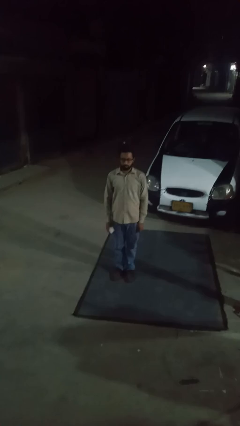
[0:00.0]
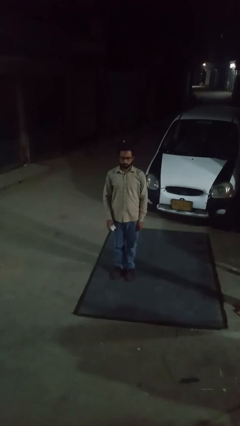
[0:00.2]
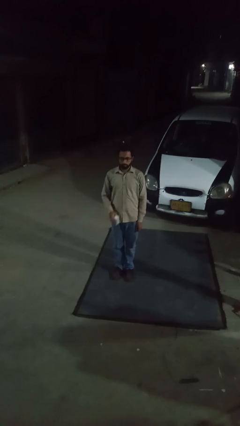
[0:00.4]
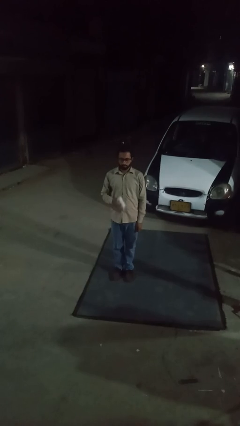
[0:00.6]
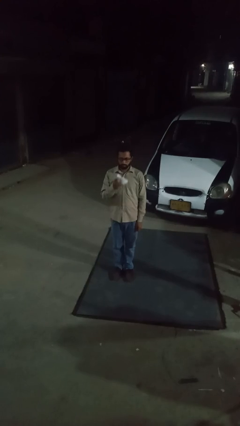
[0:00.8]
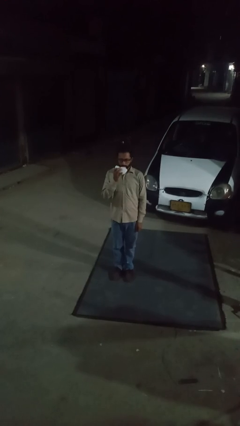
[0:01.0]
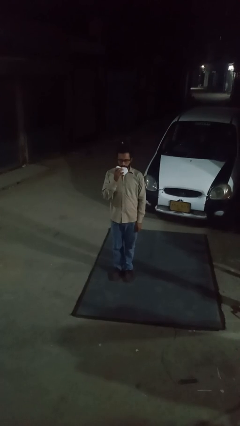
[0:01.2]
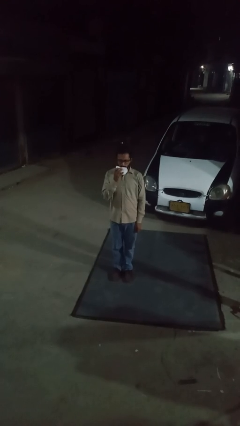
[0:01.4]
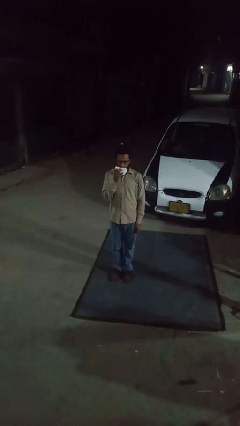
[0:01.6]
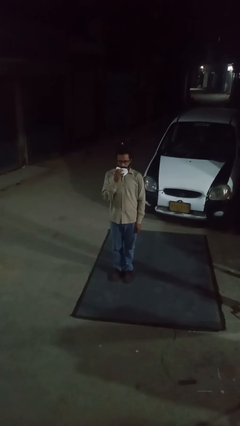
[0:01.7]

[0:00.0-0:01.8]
person wipes mouth with napkin

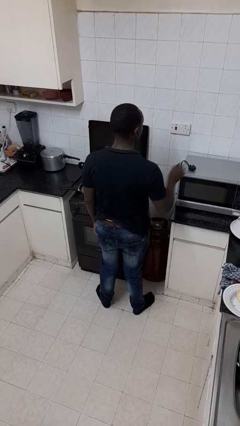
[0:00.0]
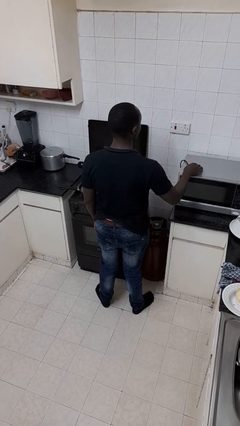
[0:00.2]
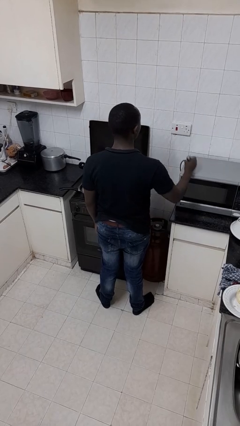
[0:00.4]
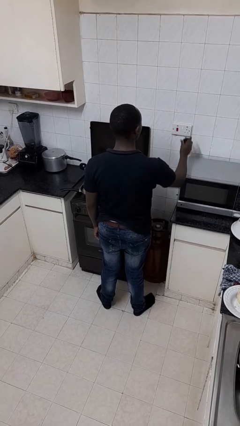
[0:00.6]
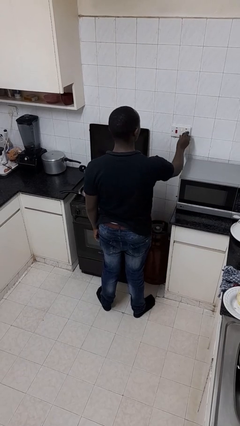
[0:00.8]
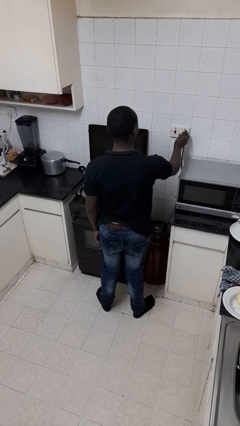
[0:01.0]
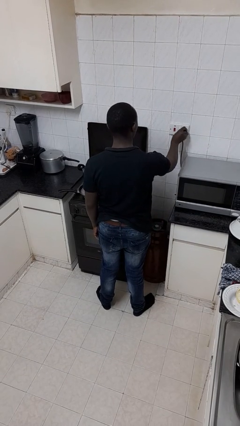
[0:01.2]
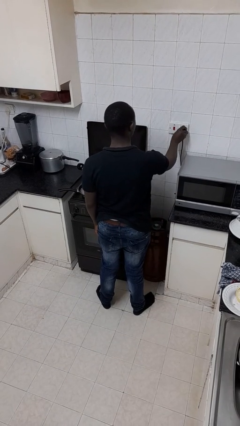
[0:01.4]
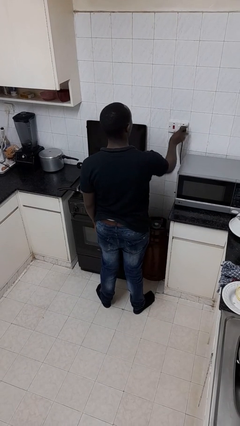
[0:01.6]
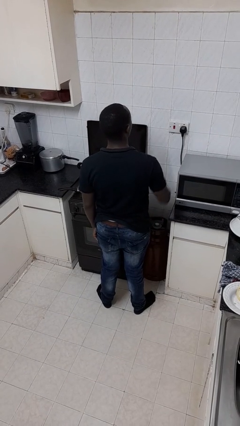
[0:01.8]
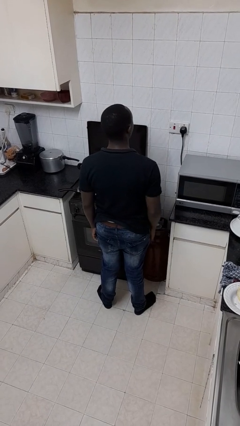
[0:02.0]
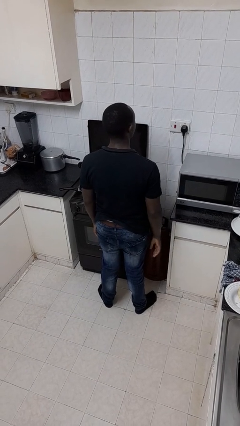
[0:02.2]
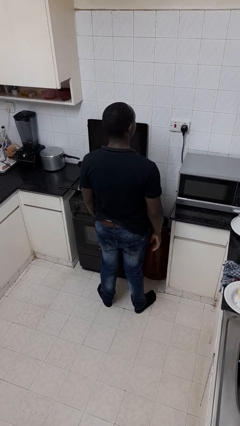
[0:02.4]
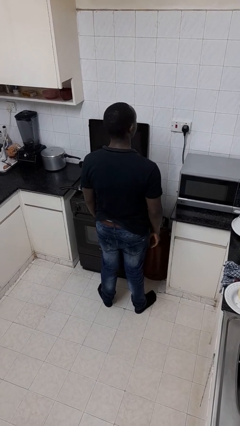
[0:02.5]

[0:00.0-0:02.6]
person plugs into electrical socket

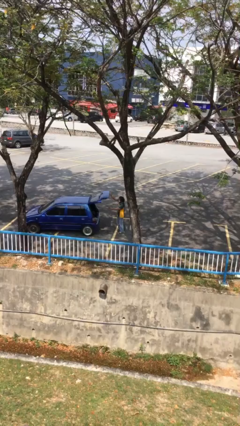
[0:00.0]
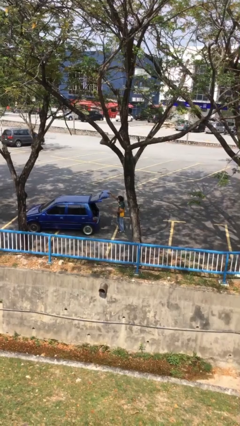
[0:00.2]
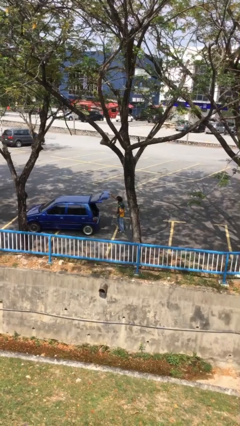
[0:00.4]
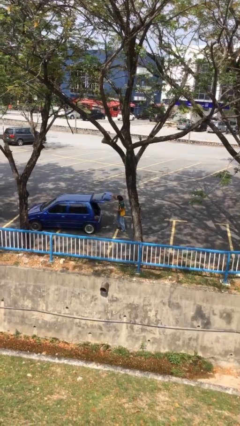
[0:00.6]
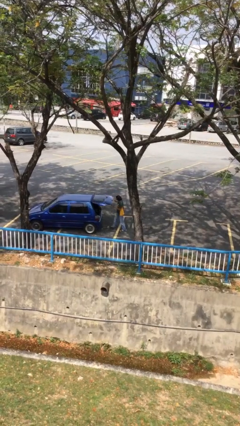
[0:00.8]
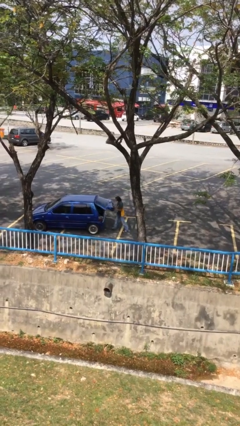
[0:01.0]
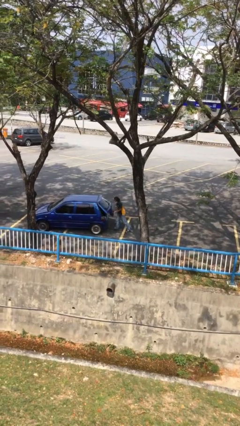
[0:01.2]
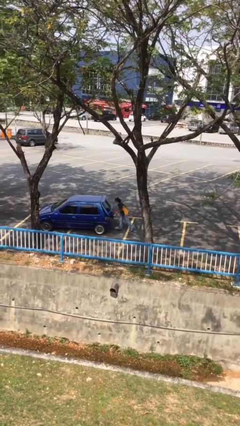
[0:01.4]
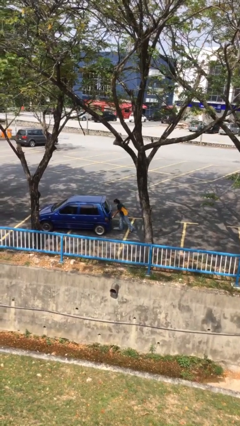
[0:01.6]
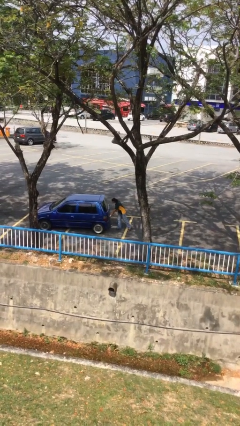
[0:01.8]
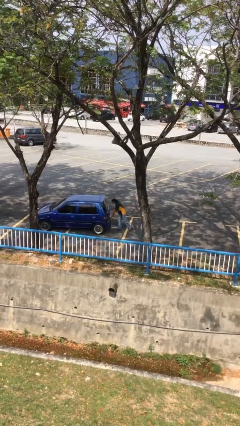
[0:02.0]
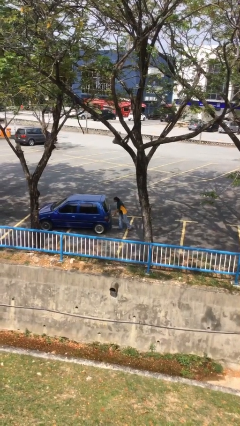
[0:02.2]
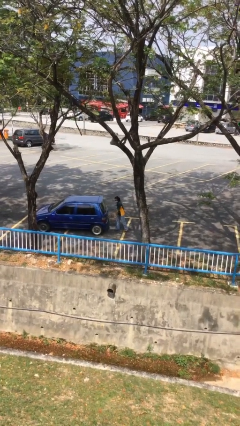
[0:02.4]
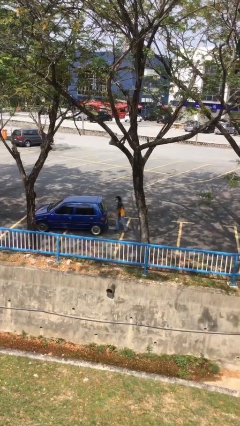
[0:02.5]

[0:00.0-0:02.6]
person closes car trunk

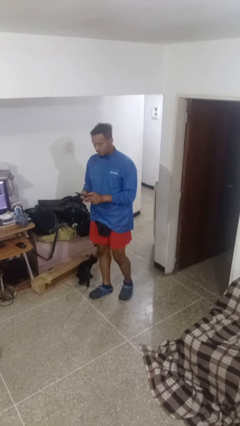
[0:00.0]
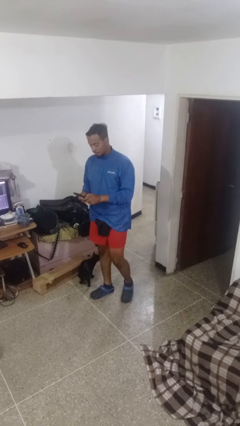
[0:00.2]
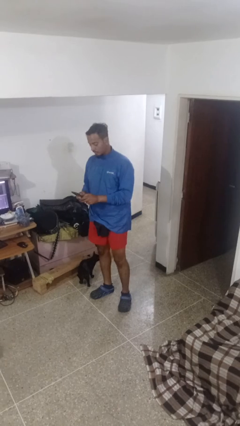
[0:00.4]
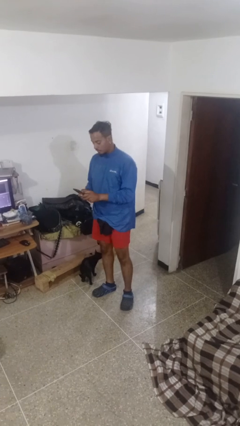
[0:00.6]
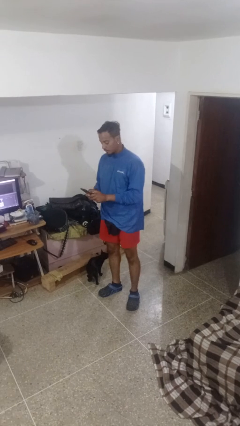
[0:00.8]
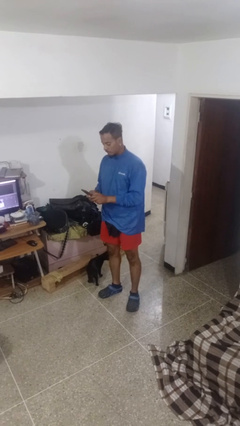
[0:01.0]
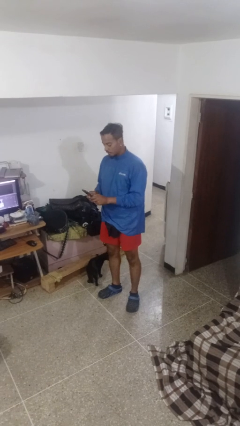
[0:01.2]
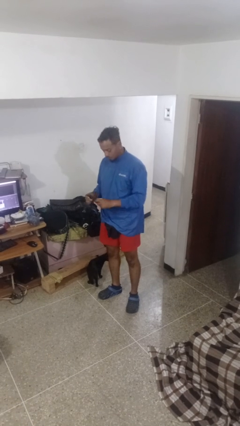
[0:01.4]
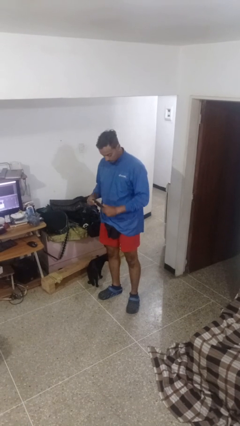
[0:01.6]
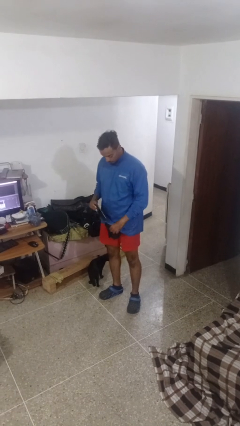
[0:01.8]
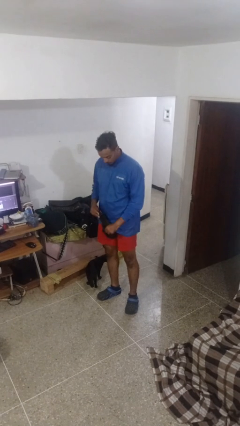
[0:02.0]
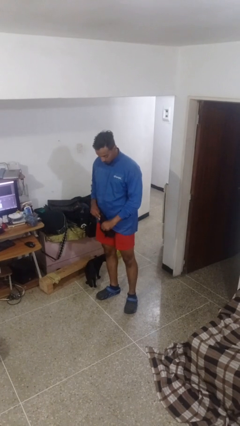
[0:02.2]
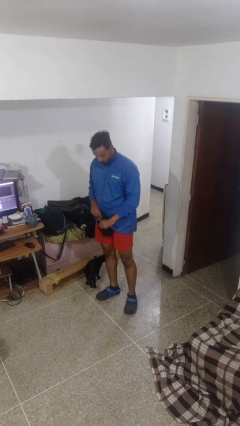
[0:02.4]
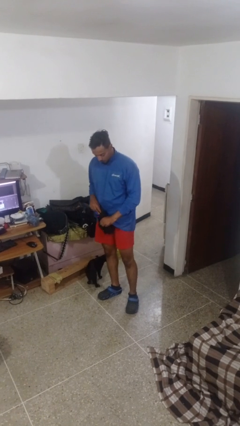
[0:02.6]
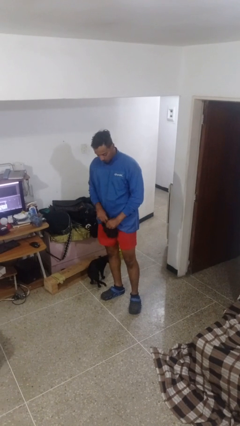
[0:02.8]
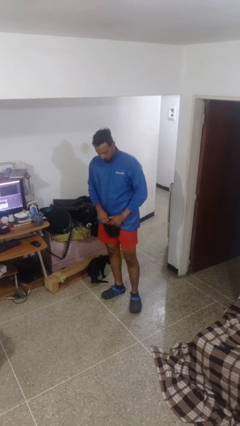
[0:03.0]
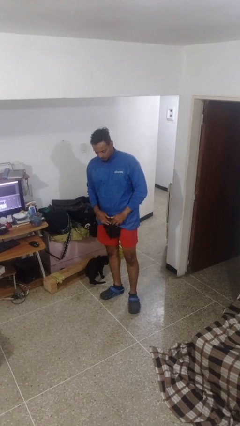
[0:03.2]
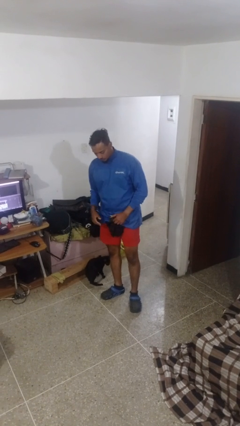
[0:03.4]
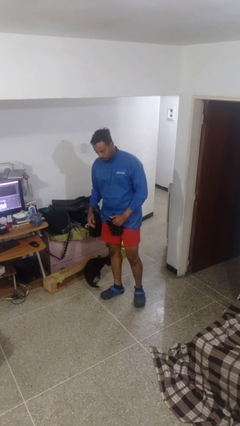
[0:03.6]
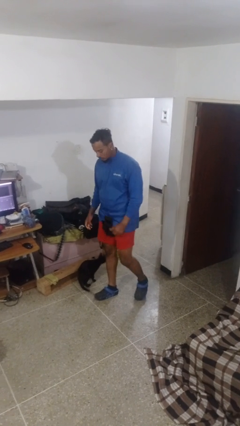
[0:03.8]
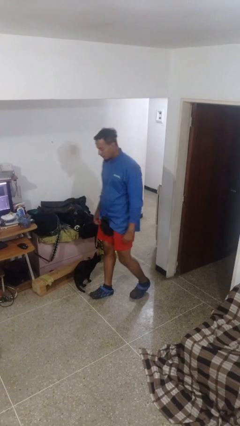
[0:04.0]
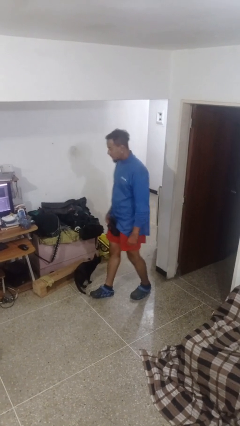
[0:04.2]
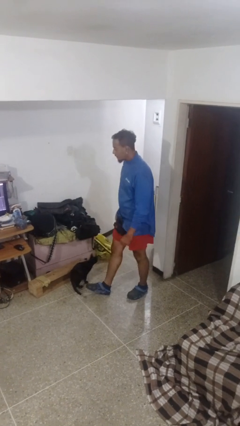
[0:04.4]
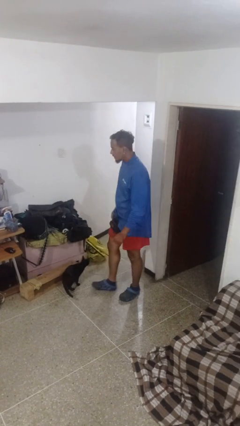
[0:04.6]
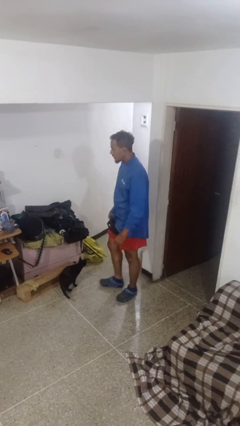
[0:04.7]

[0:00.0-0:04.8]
person puts phone into pocket

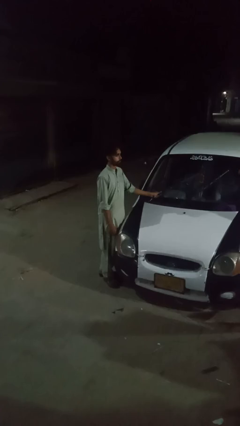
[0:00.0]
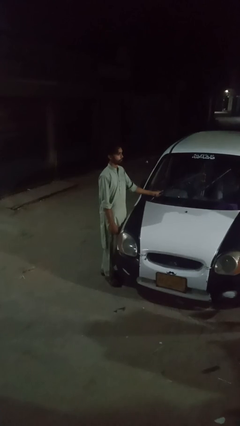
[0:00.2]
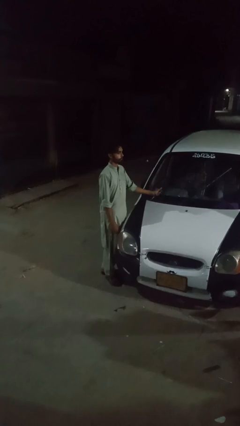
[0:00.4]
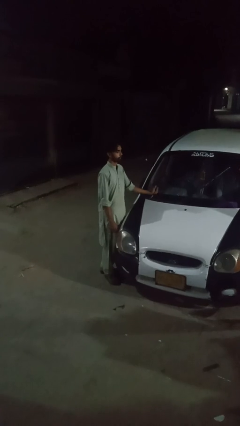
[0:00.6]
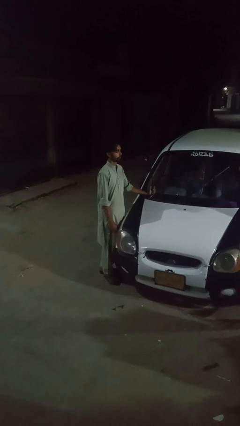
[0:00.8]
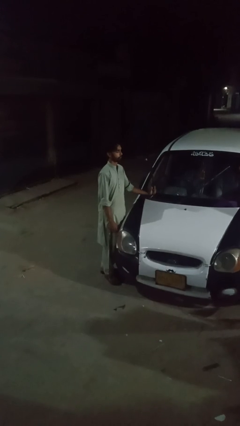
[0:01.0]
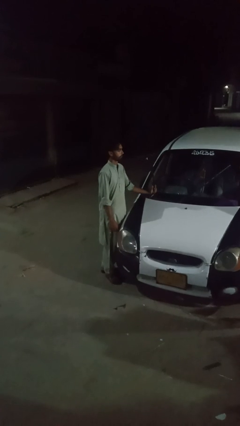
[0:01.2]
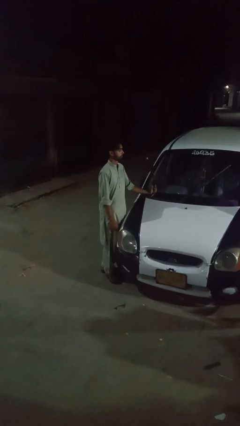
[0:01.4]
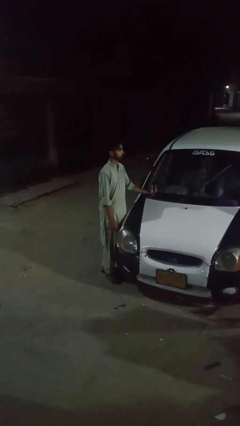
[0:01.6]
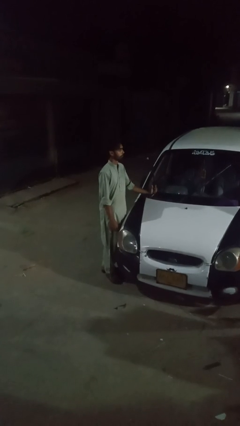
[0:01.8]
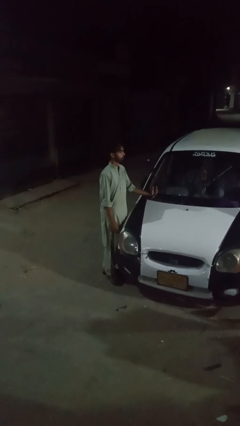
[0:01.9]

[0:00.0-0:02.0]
person flips up car wipers

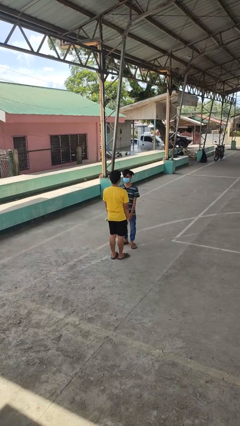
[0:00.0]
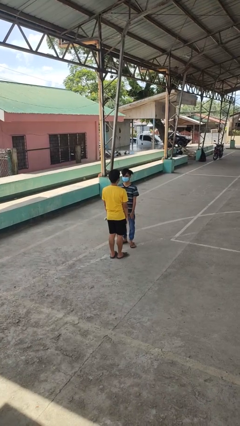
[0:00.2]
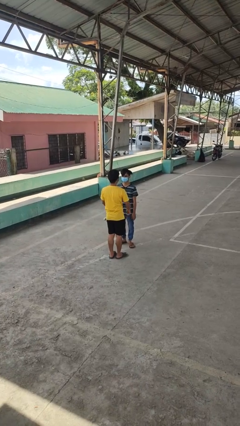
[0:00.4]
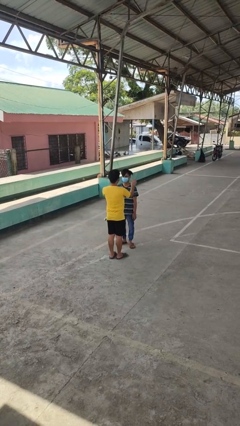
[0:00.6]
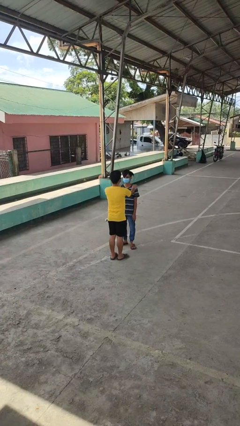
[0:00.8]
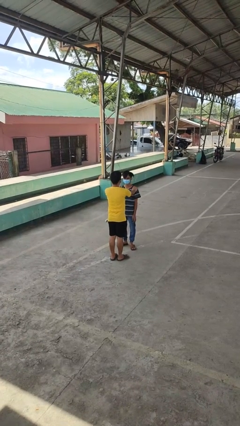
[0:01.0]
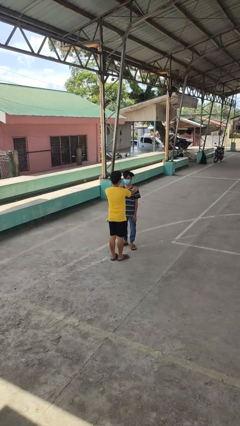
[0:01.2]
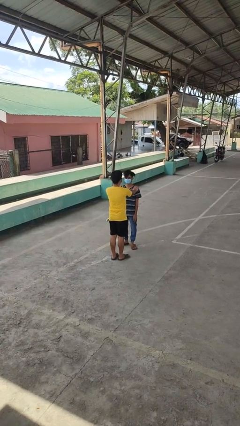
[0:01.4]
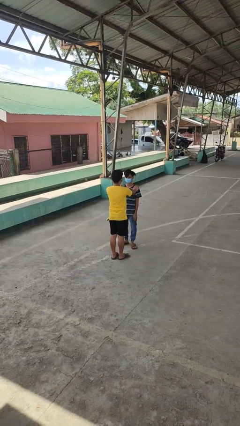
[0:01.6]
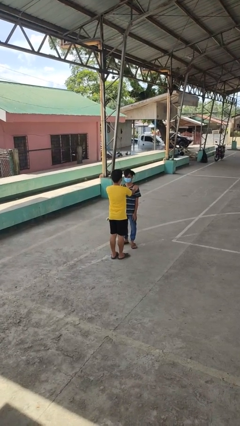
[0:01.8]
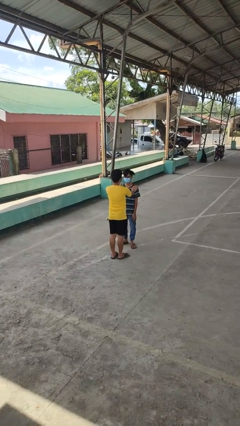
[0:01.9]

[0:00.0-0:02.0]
person grabs person by shoulder

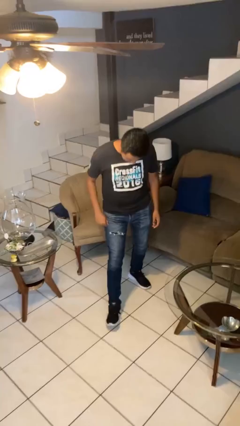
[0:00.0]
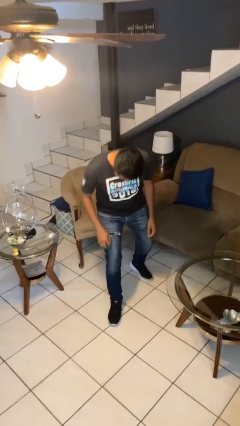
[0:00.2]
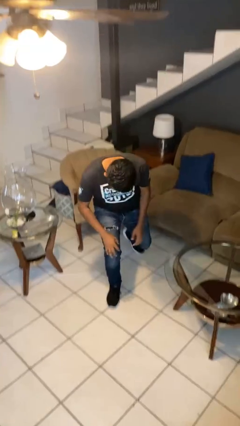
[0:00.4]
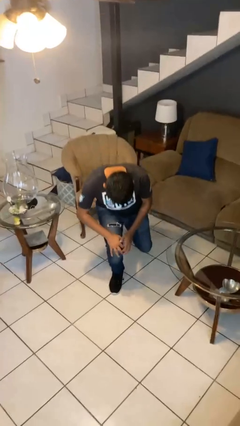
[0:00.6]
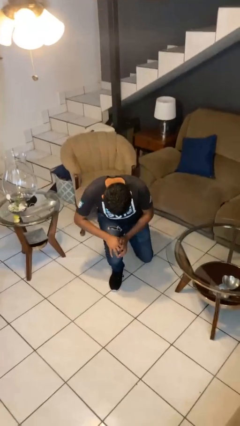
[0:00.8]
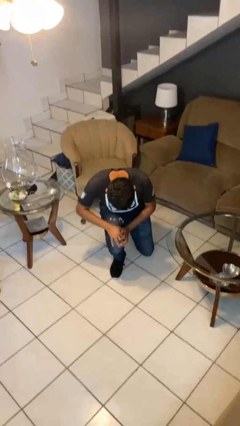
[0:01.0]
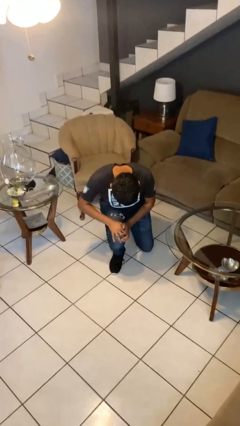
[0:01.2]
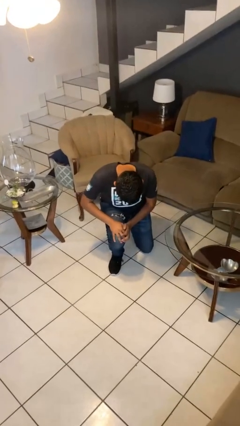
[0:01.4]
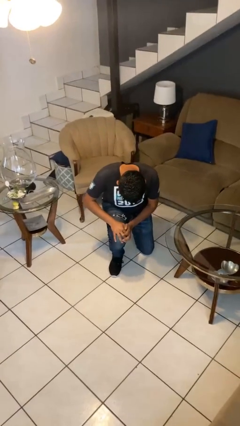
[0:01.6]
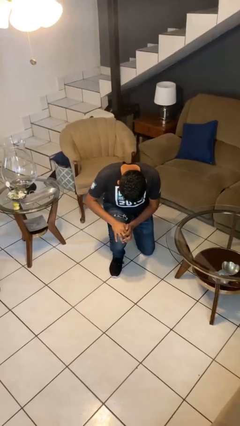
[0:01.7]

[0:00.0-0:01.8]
person kneels
